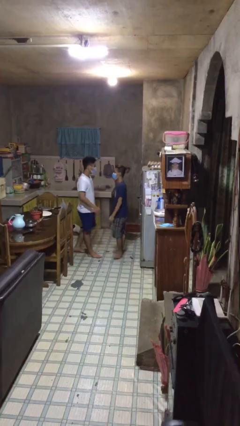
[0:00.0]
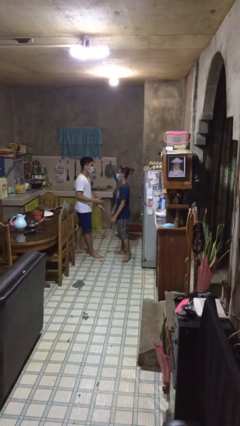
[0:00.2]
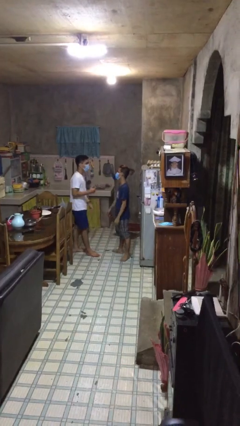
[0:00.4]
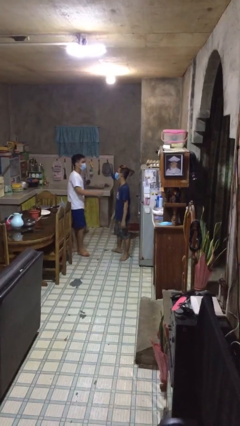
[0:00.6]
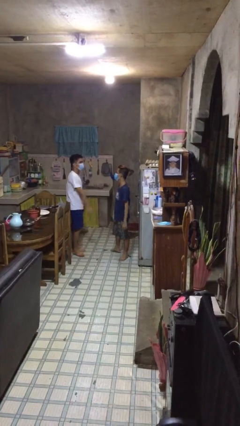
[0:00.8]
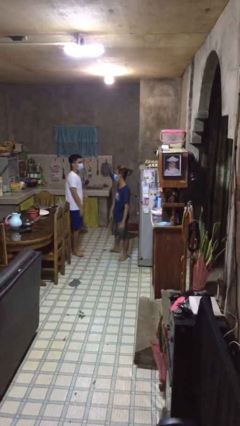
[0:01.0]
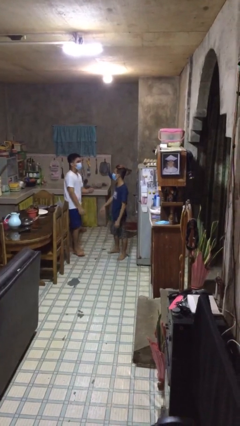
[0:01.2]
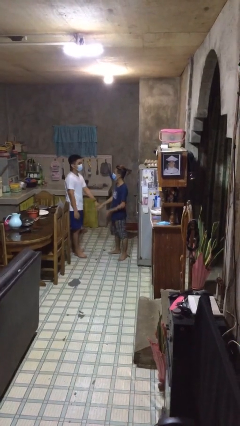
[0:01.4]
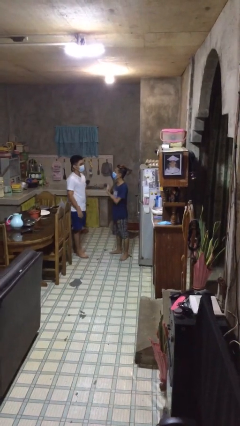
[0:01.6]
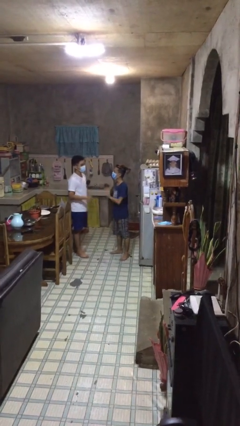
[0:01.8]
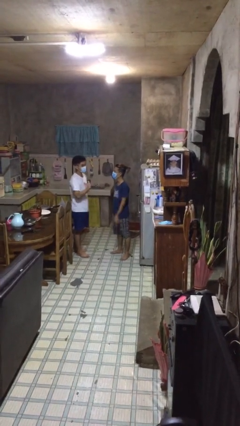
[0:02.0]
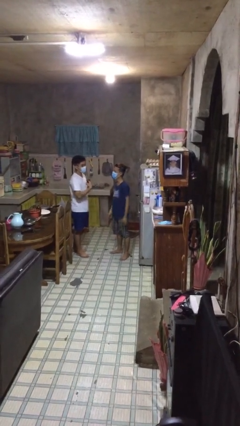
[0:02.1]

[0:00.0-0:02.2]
person talks to person

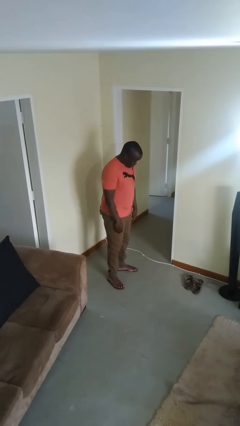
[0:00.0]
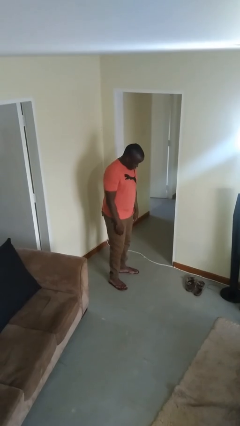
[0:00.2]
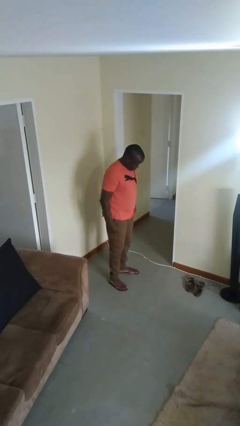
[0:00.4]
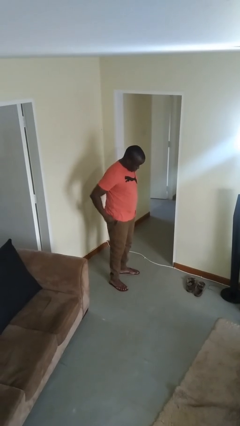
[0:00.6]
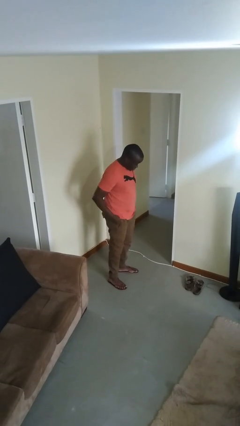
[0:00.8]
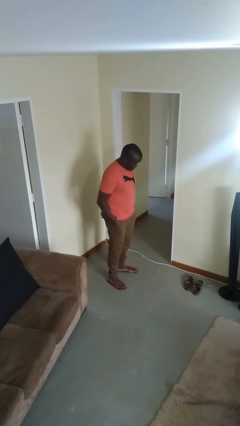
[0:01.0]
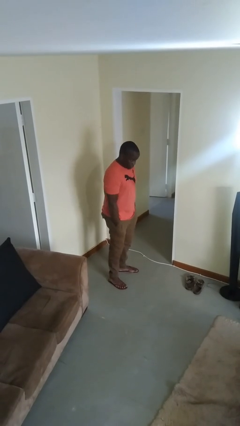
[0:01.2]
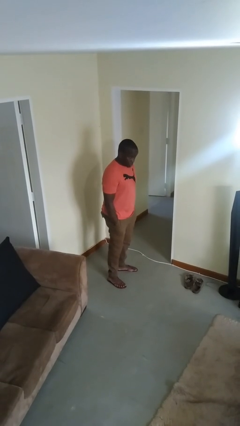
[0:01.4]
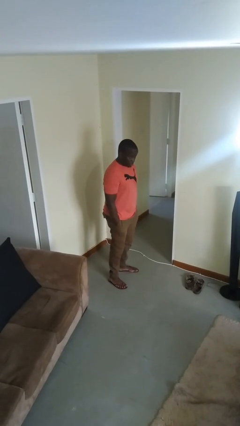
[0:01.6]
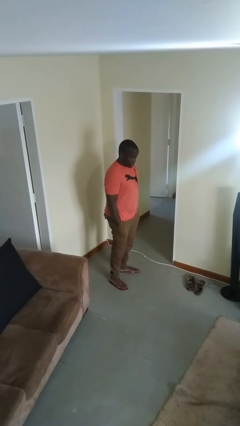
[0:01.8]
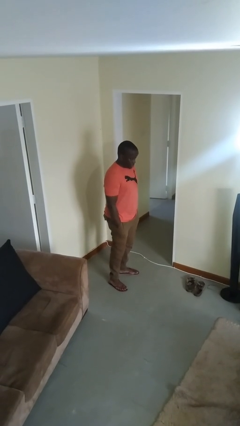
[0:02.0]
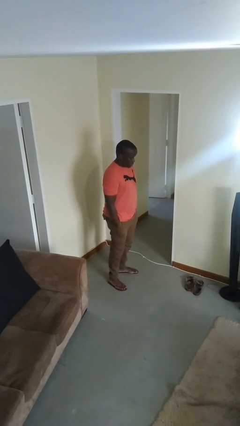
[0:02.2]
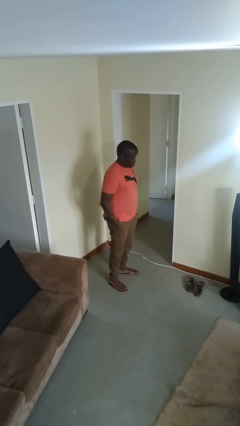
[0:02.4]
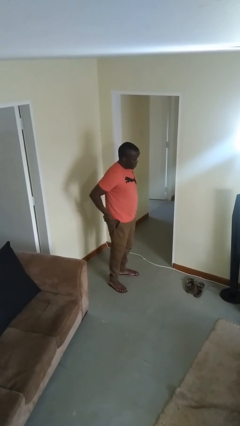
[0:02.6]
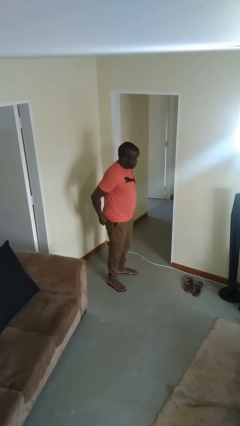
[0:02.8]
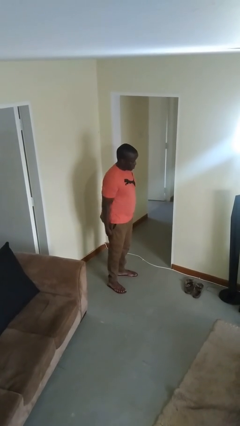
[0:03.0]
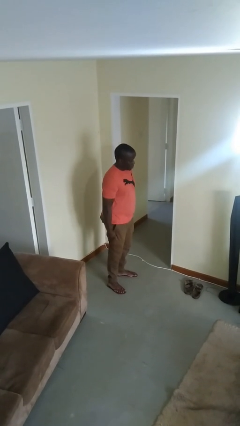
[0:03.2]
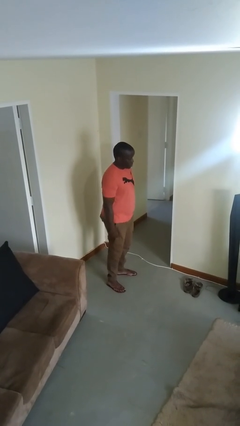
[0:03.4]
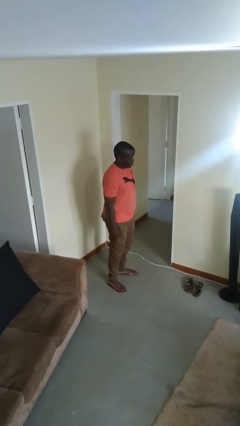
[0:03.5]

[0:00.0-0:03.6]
person puts hands in back pockets

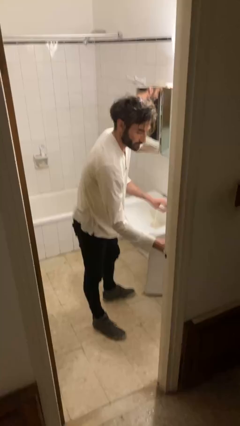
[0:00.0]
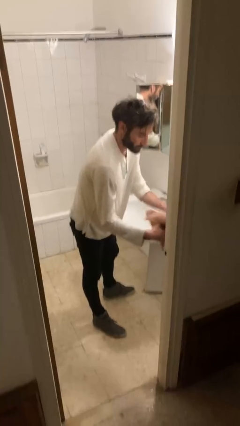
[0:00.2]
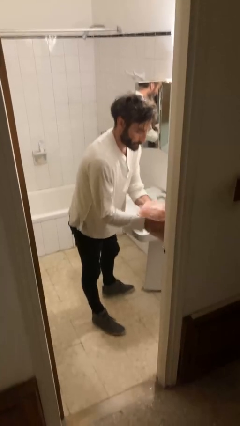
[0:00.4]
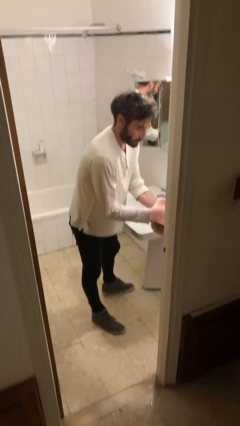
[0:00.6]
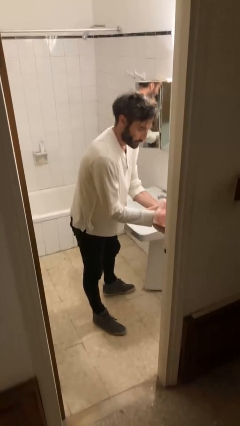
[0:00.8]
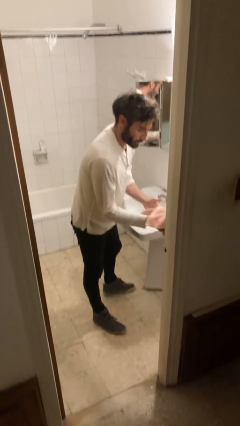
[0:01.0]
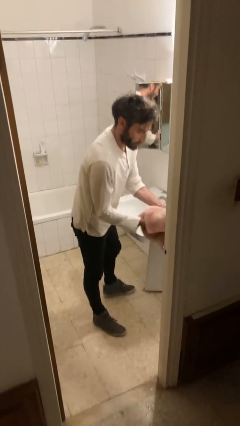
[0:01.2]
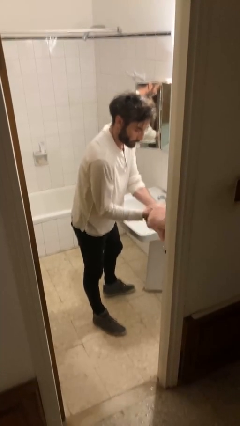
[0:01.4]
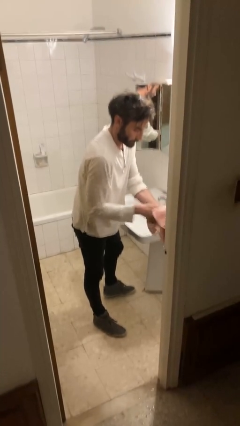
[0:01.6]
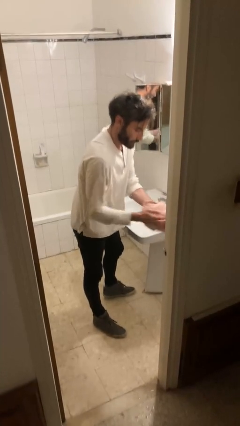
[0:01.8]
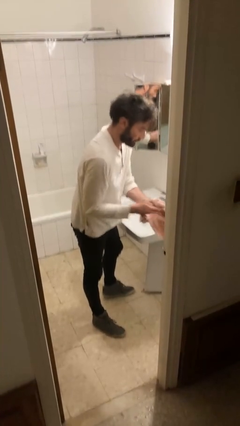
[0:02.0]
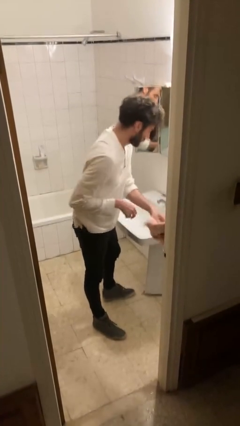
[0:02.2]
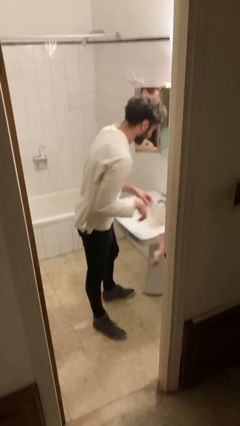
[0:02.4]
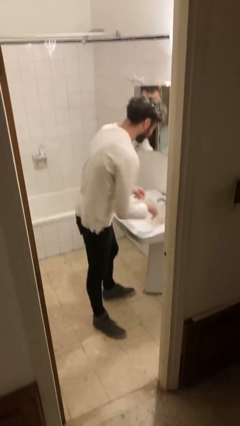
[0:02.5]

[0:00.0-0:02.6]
person dries hands with towel

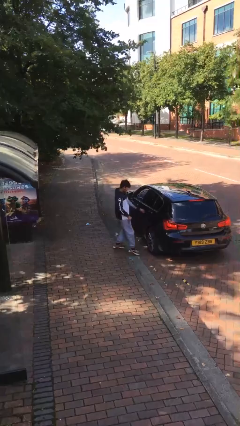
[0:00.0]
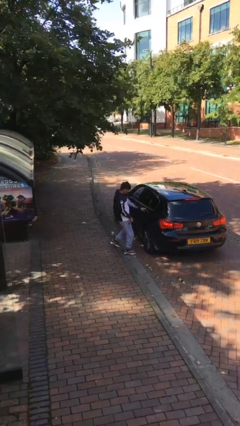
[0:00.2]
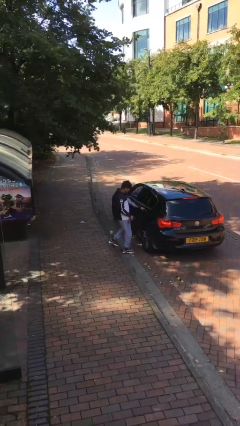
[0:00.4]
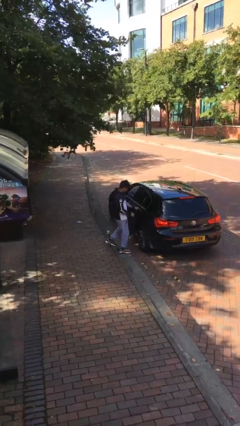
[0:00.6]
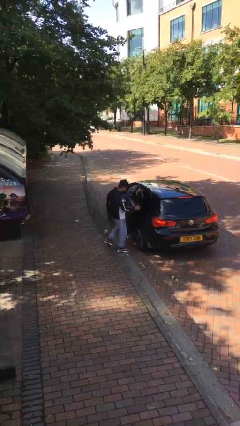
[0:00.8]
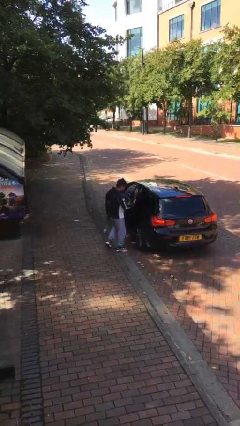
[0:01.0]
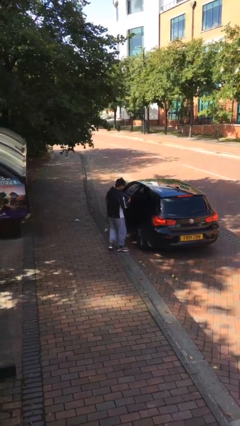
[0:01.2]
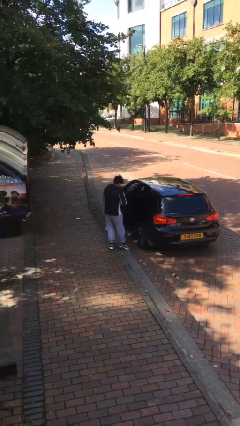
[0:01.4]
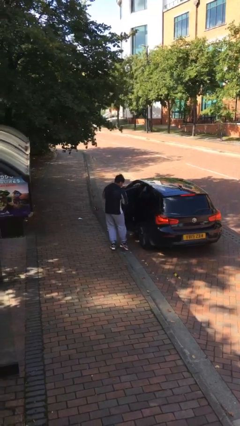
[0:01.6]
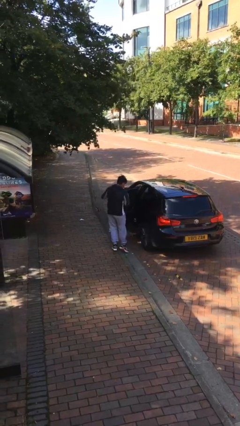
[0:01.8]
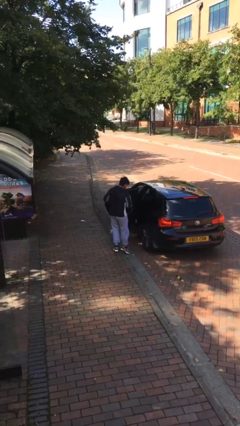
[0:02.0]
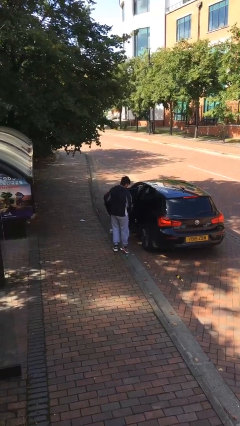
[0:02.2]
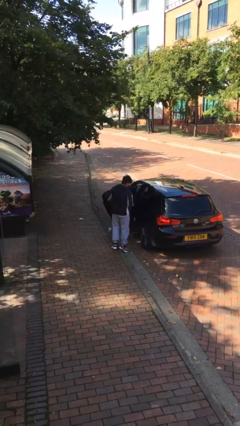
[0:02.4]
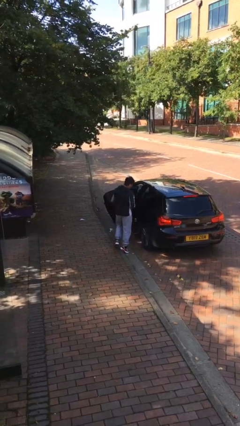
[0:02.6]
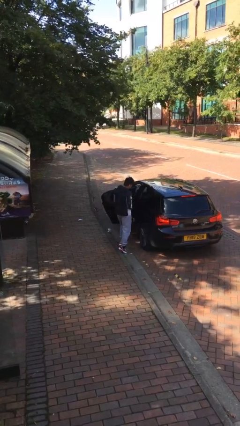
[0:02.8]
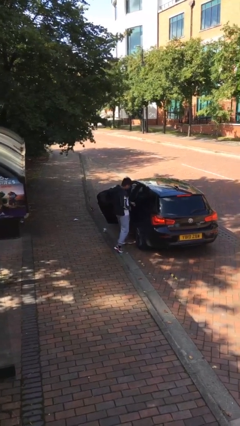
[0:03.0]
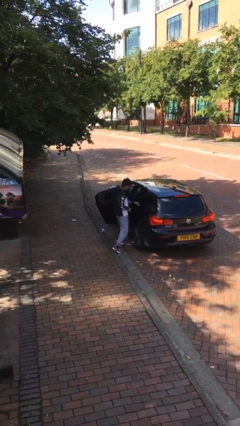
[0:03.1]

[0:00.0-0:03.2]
person opens car door

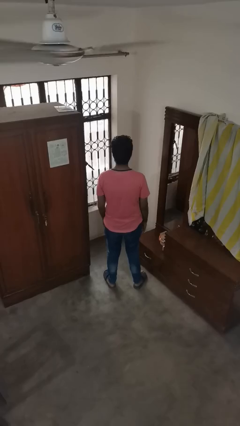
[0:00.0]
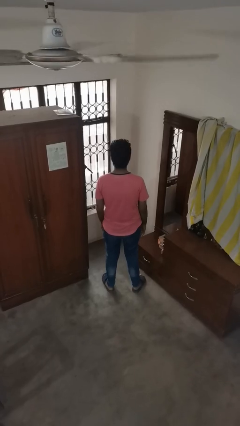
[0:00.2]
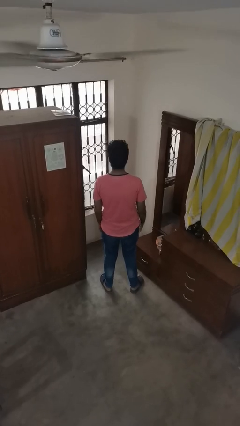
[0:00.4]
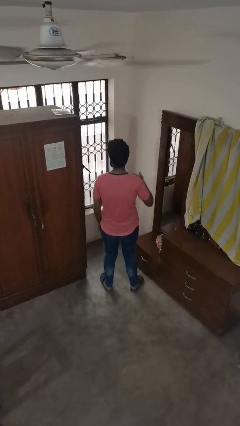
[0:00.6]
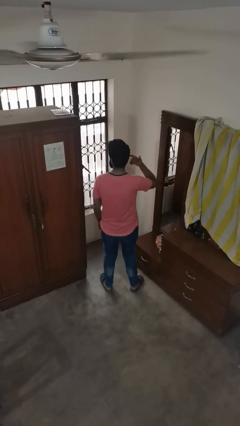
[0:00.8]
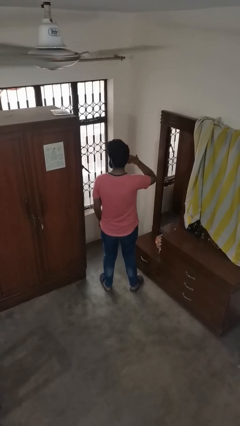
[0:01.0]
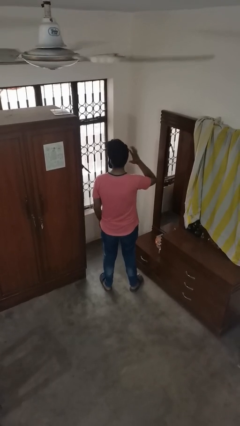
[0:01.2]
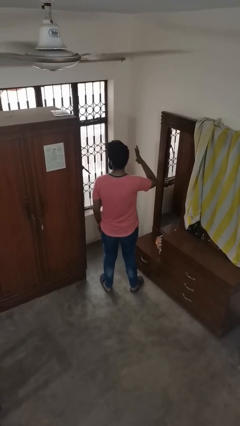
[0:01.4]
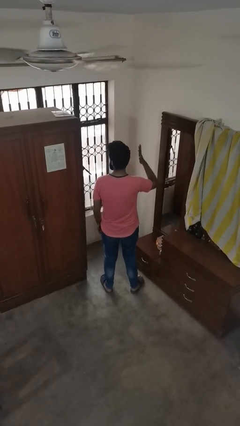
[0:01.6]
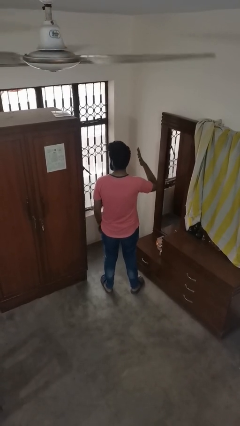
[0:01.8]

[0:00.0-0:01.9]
person puts fingers in ear

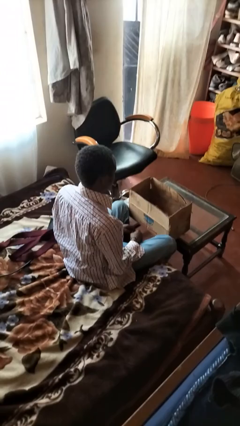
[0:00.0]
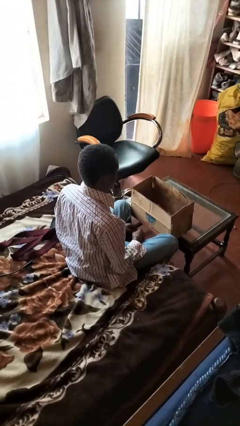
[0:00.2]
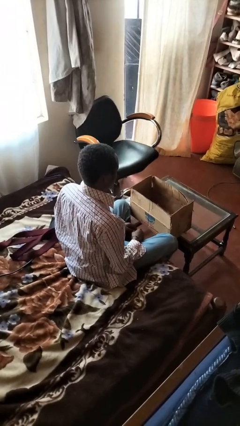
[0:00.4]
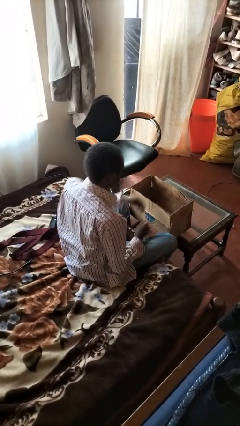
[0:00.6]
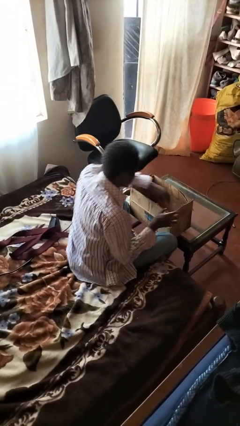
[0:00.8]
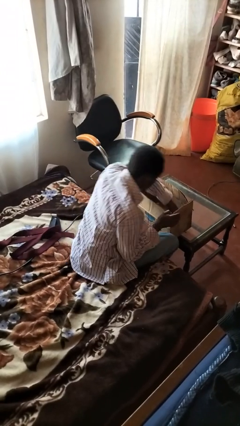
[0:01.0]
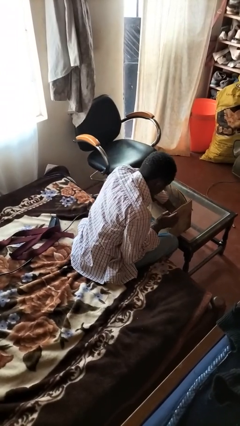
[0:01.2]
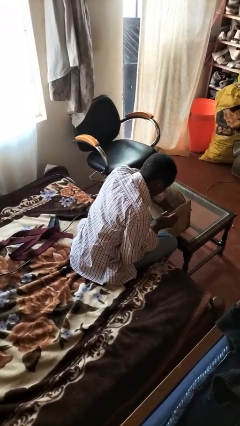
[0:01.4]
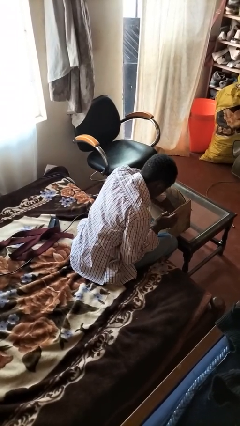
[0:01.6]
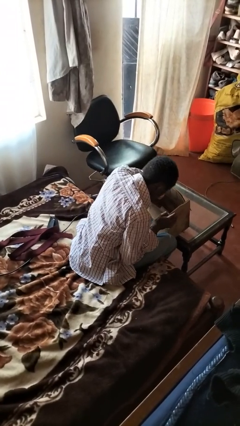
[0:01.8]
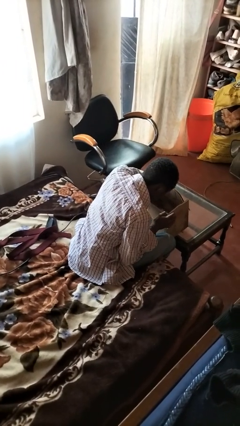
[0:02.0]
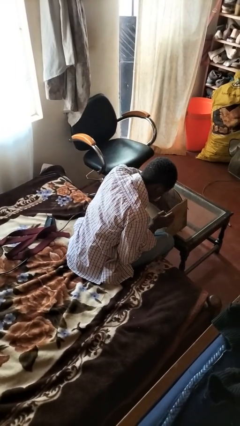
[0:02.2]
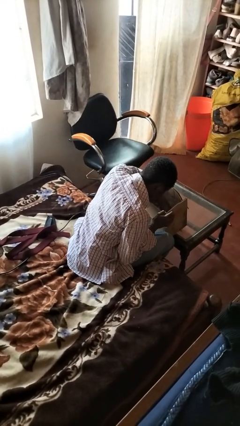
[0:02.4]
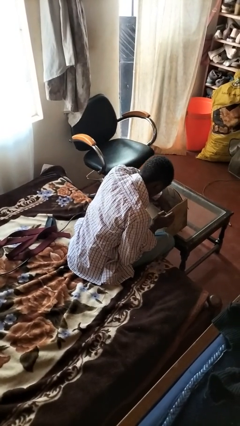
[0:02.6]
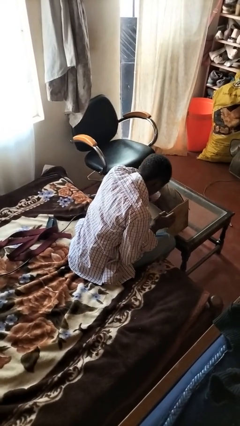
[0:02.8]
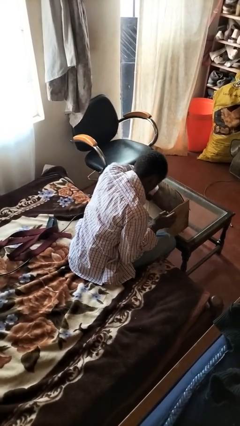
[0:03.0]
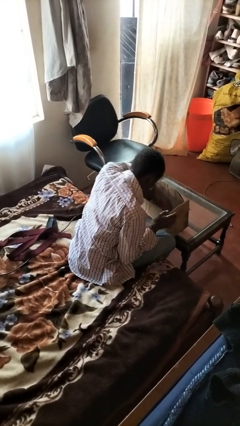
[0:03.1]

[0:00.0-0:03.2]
person searches in box

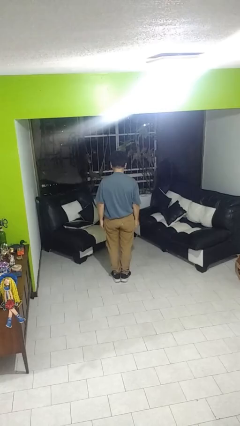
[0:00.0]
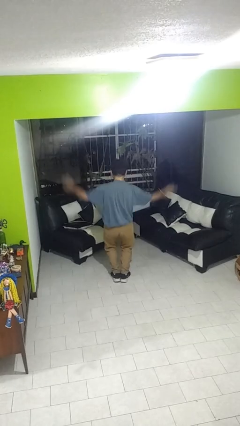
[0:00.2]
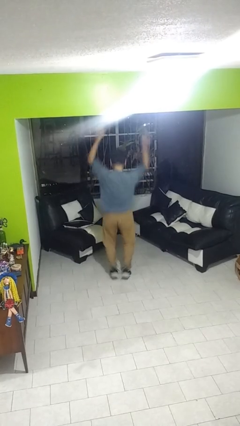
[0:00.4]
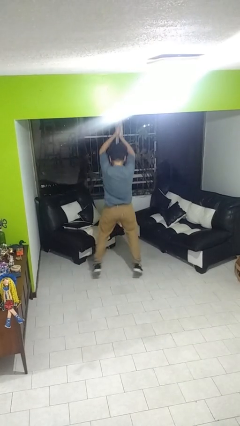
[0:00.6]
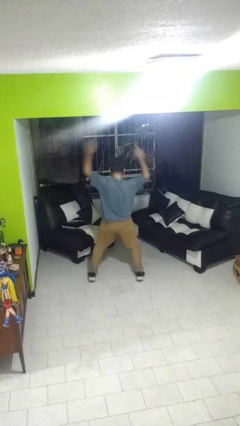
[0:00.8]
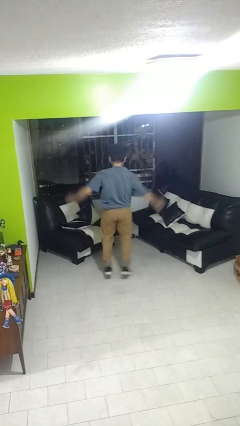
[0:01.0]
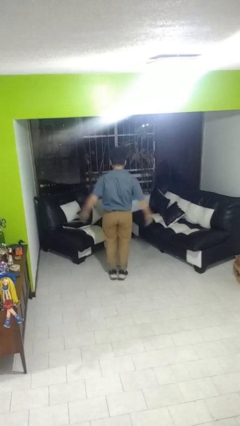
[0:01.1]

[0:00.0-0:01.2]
person exercises with jumping jacks
